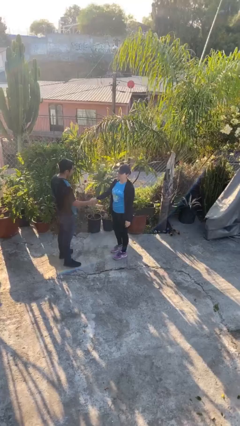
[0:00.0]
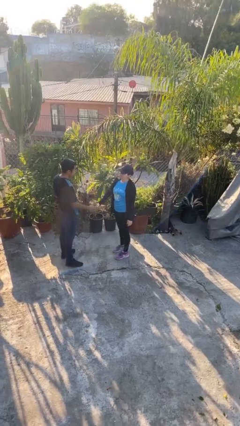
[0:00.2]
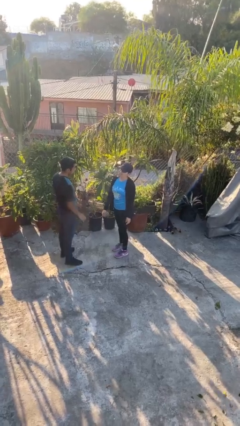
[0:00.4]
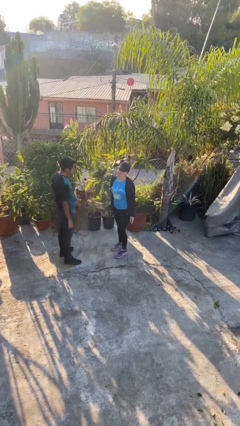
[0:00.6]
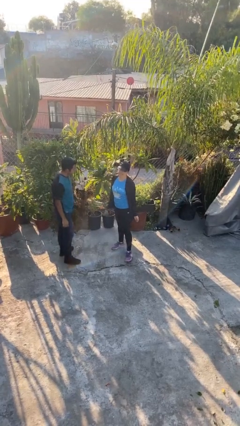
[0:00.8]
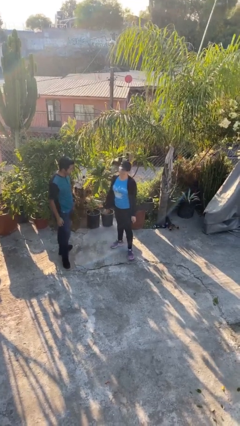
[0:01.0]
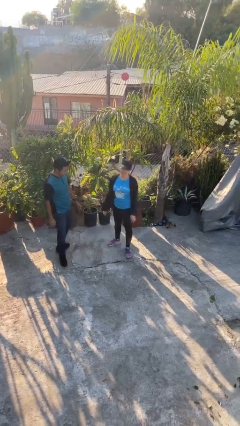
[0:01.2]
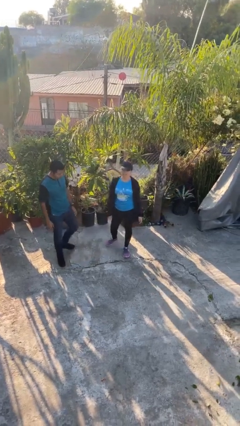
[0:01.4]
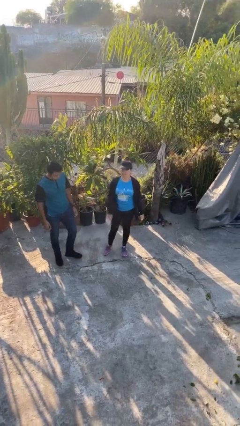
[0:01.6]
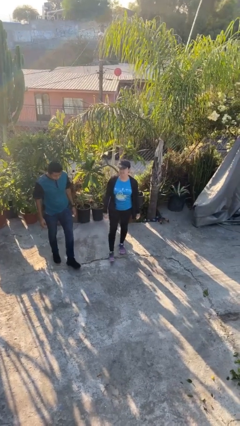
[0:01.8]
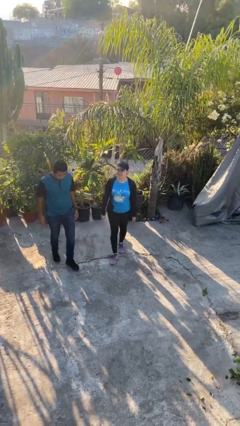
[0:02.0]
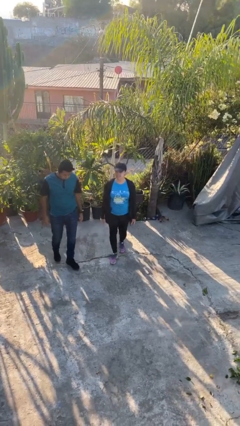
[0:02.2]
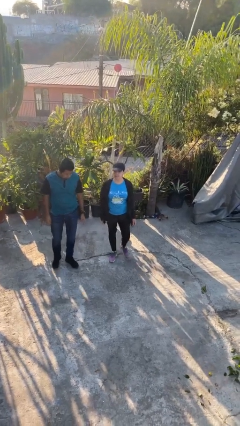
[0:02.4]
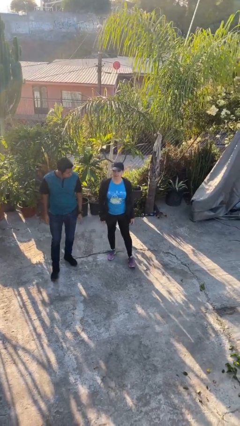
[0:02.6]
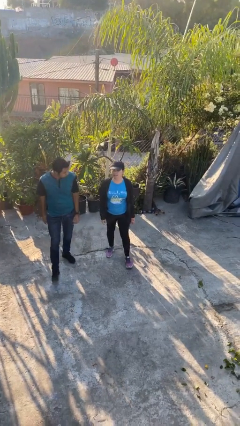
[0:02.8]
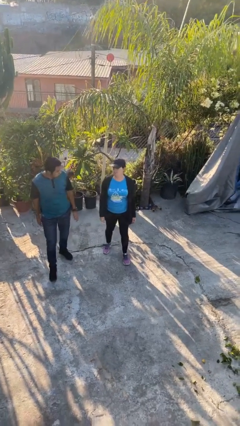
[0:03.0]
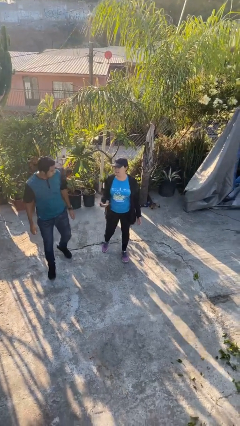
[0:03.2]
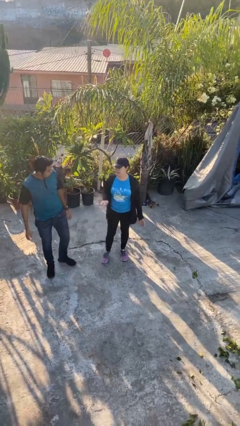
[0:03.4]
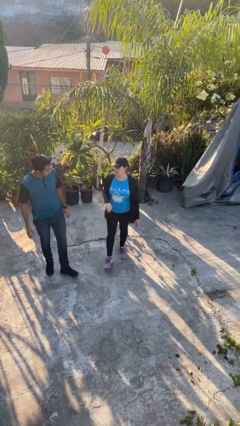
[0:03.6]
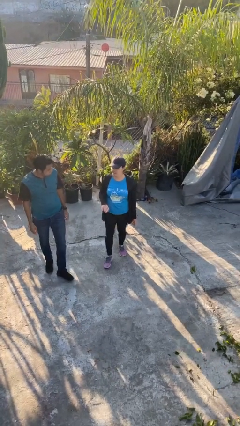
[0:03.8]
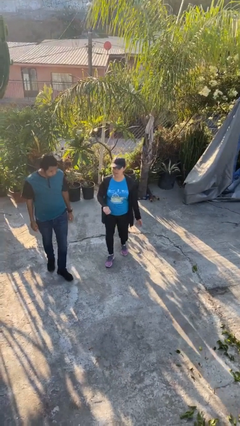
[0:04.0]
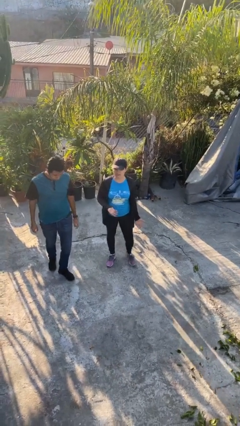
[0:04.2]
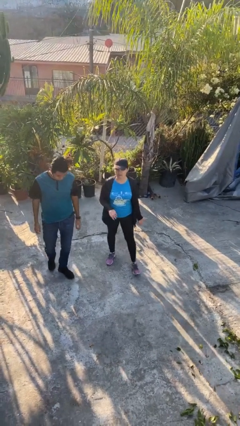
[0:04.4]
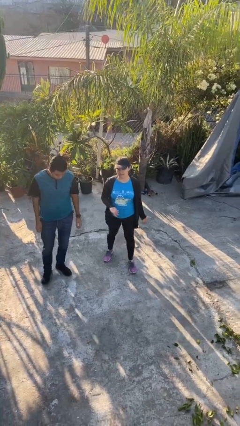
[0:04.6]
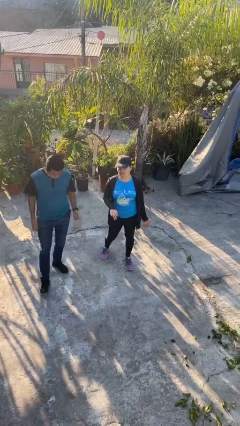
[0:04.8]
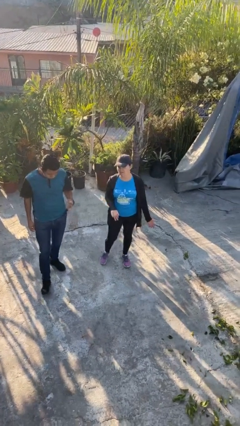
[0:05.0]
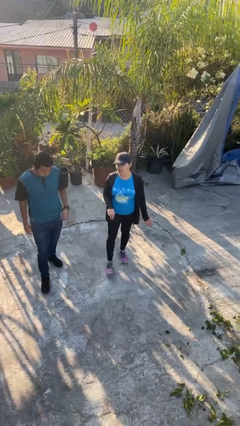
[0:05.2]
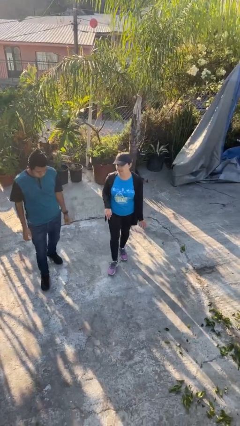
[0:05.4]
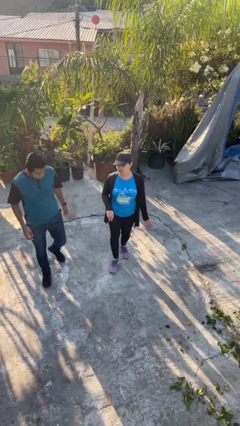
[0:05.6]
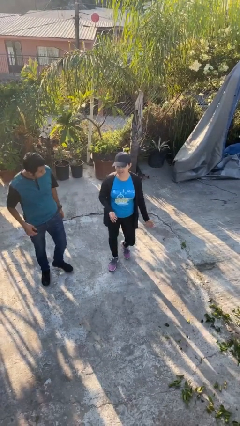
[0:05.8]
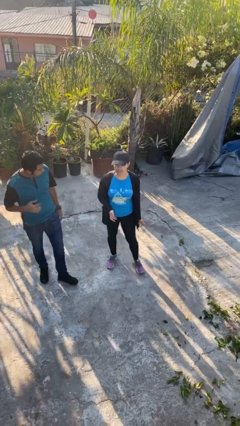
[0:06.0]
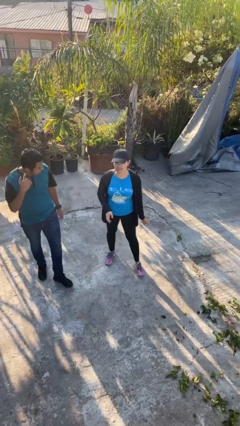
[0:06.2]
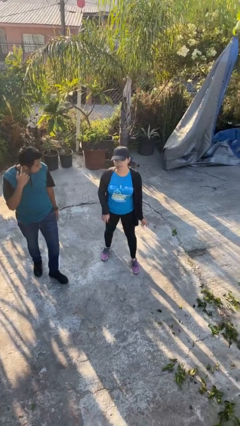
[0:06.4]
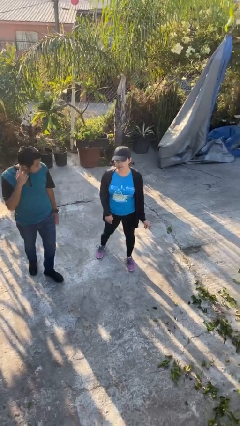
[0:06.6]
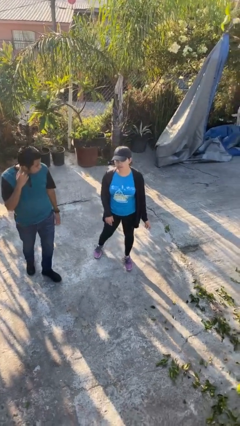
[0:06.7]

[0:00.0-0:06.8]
person talks to person

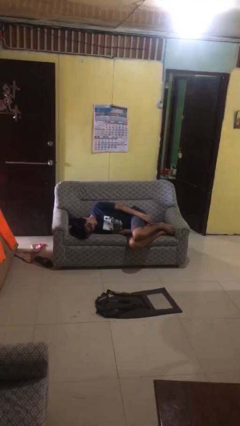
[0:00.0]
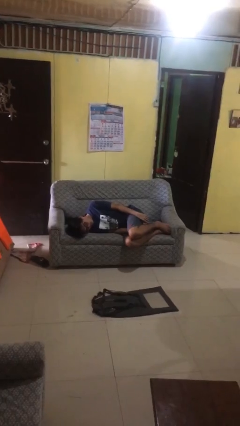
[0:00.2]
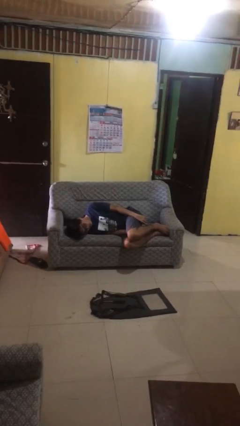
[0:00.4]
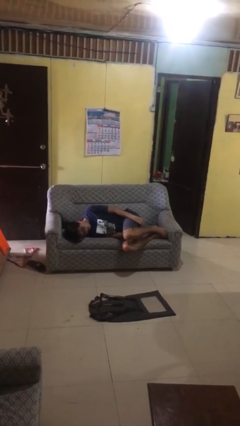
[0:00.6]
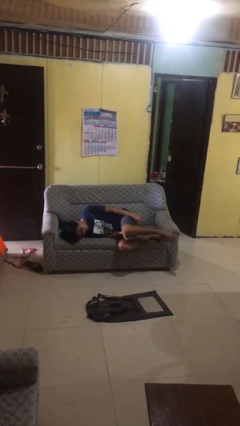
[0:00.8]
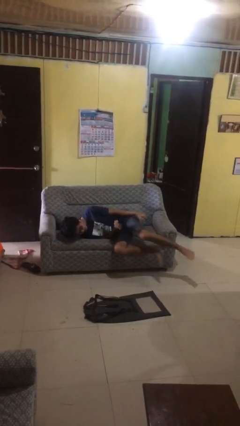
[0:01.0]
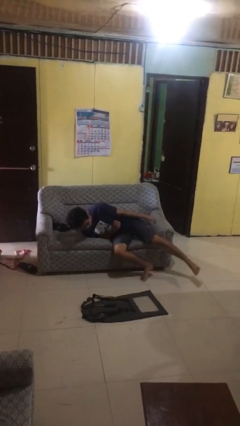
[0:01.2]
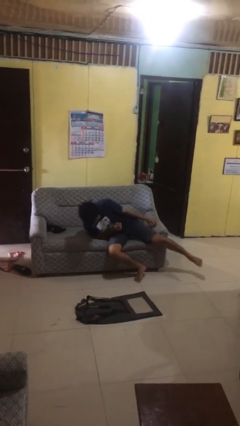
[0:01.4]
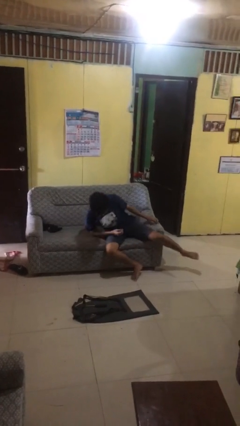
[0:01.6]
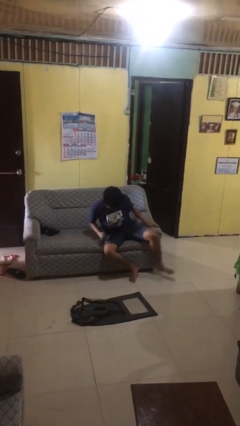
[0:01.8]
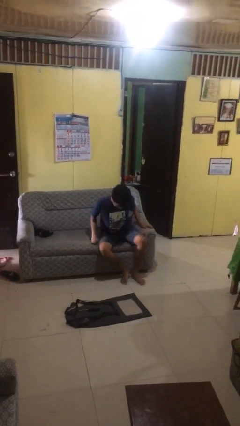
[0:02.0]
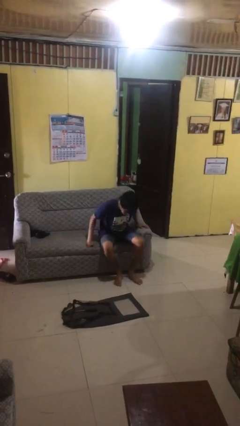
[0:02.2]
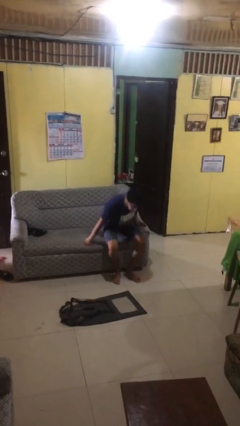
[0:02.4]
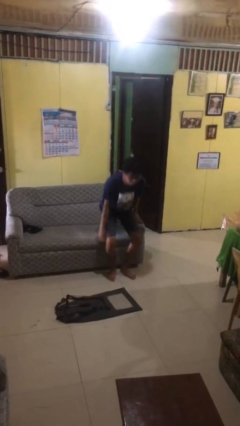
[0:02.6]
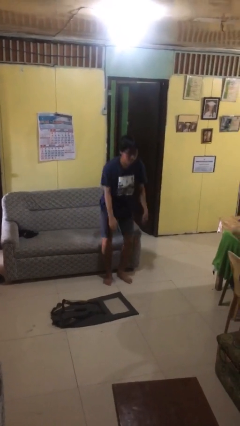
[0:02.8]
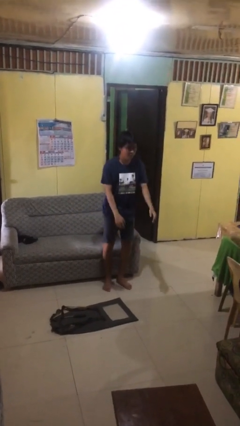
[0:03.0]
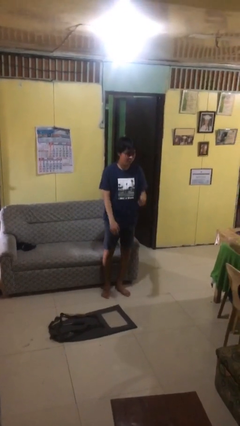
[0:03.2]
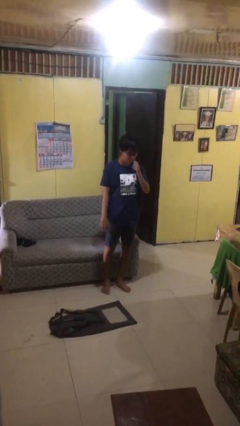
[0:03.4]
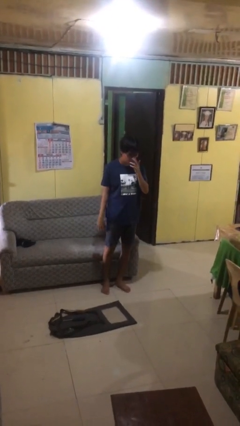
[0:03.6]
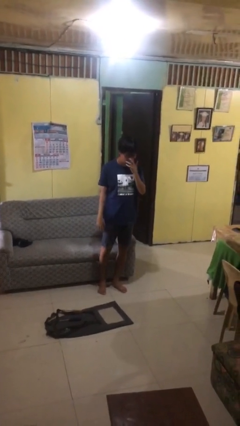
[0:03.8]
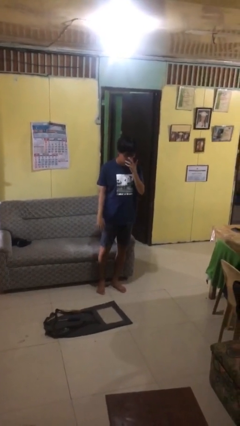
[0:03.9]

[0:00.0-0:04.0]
person stands up

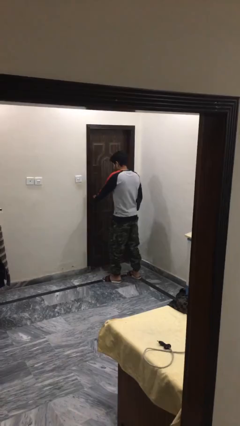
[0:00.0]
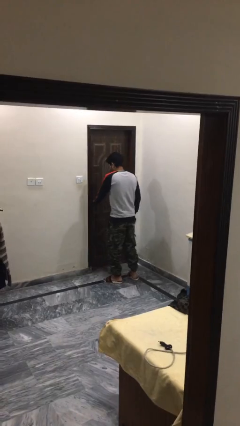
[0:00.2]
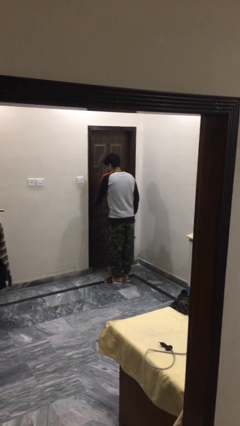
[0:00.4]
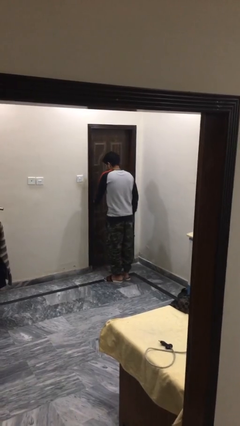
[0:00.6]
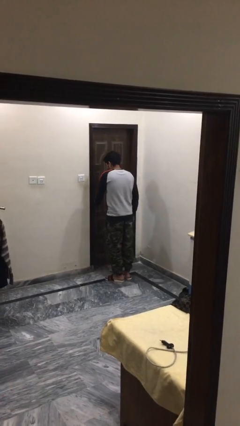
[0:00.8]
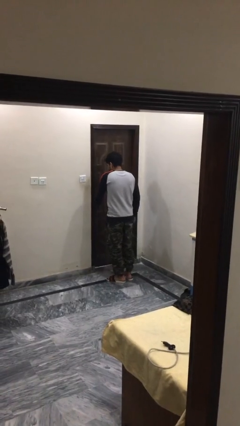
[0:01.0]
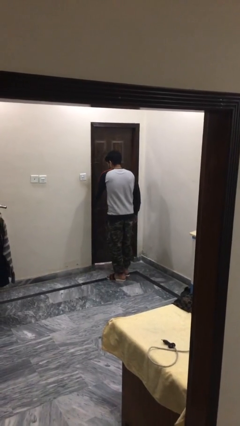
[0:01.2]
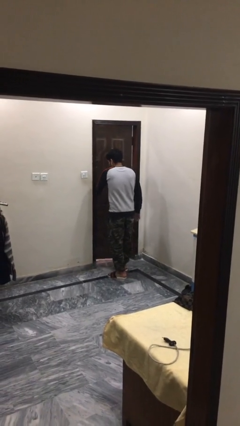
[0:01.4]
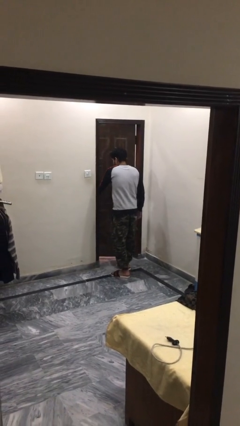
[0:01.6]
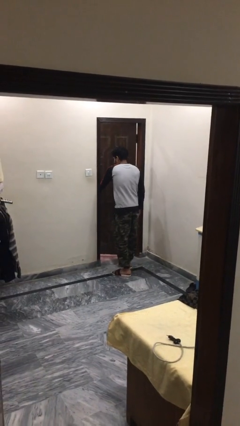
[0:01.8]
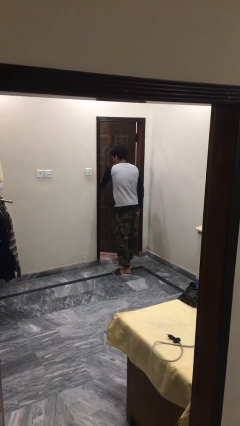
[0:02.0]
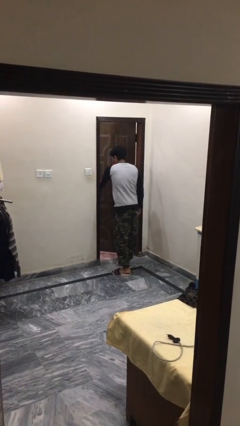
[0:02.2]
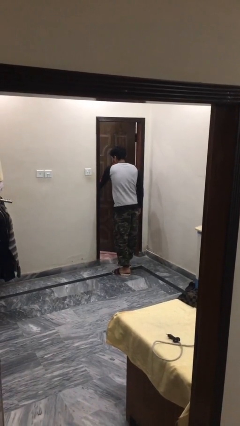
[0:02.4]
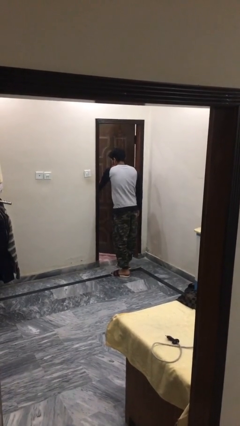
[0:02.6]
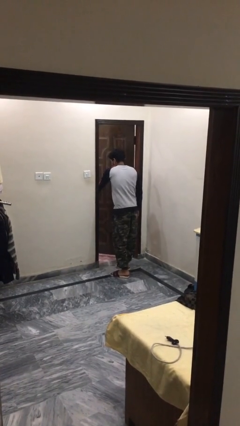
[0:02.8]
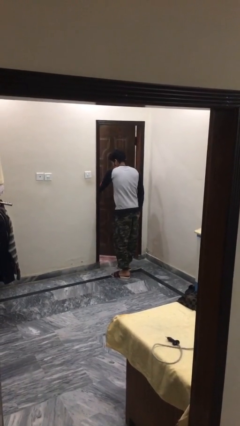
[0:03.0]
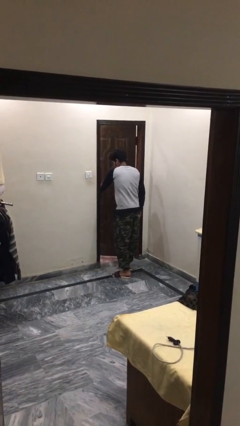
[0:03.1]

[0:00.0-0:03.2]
person opens facility door

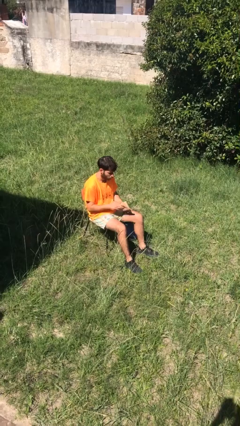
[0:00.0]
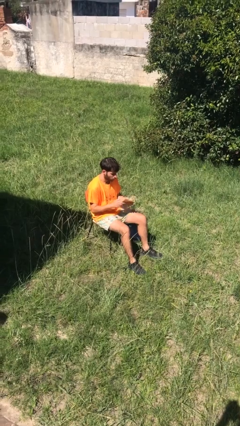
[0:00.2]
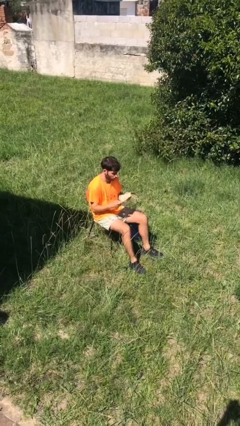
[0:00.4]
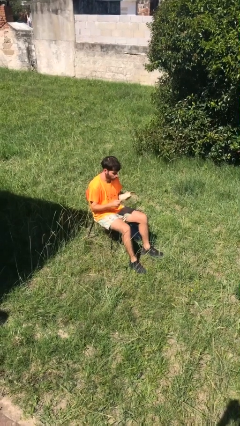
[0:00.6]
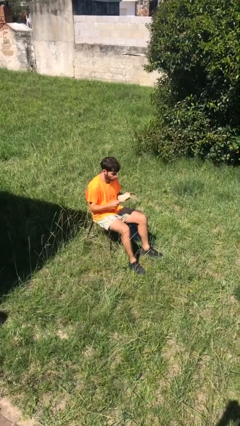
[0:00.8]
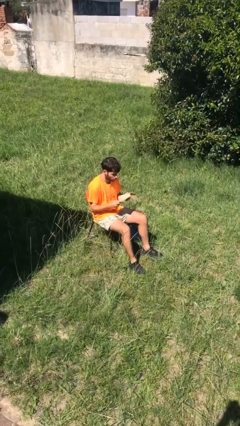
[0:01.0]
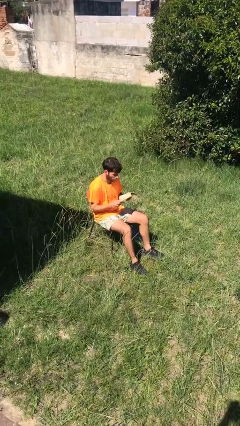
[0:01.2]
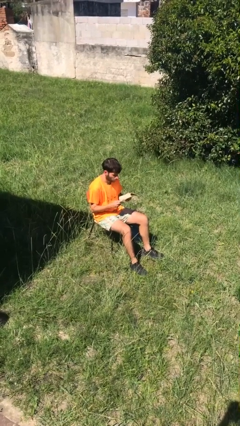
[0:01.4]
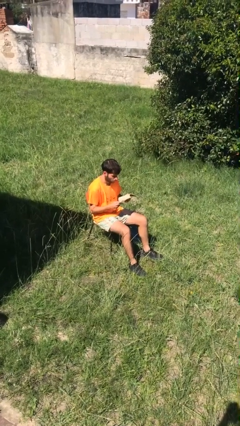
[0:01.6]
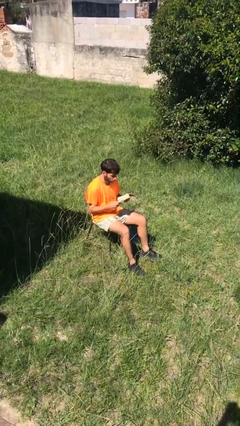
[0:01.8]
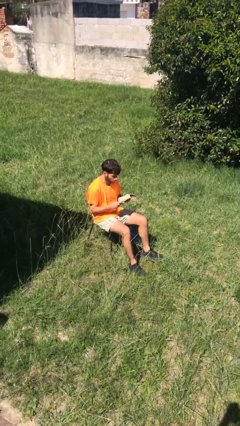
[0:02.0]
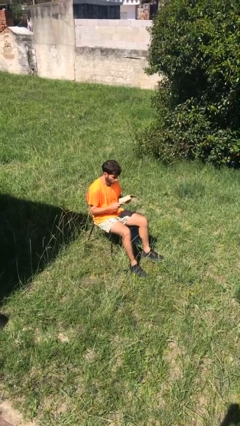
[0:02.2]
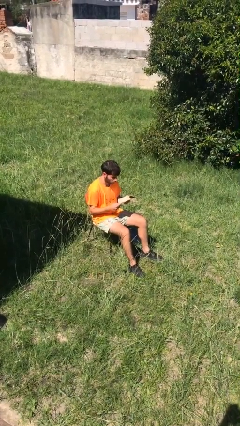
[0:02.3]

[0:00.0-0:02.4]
person reads document

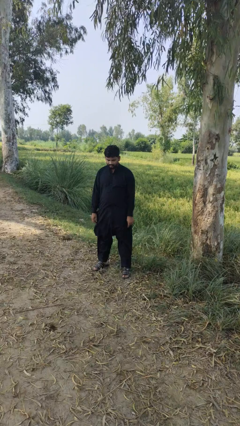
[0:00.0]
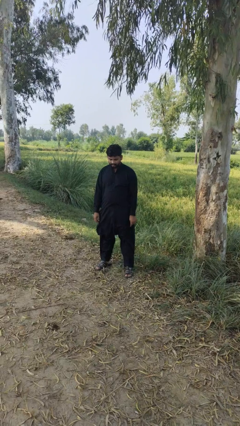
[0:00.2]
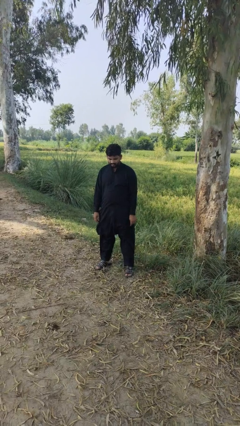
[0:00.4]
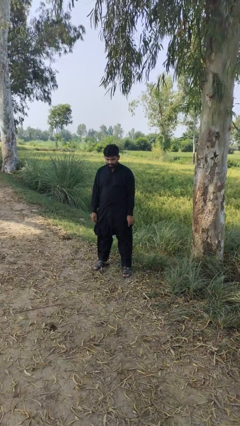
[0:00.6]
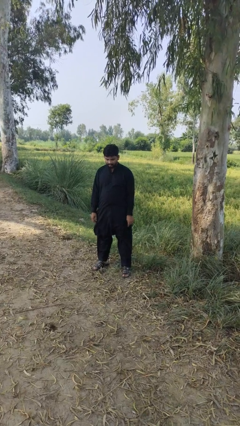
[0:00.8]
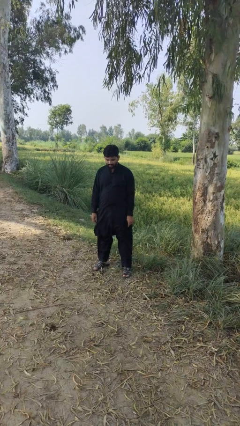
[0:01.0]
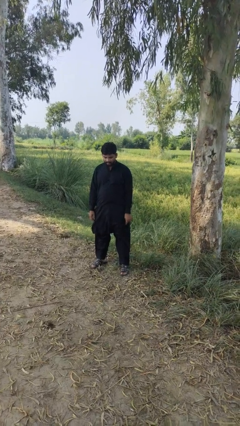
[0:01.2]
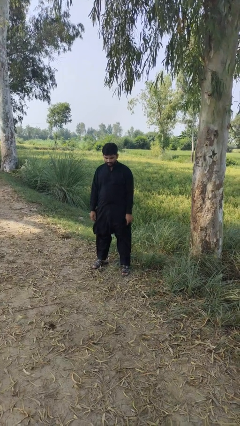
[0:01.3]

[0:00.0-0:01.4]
person sits crisscross
